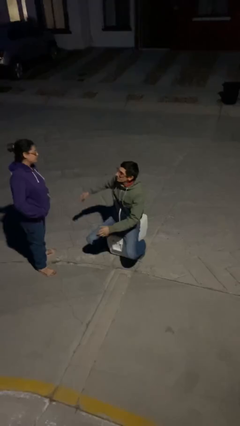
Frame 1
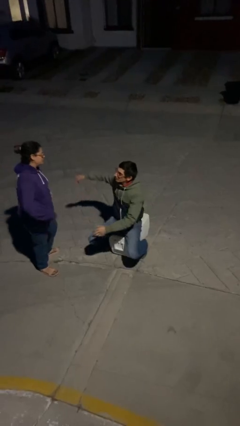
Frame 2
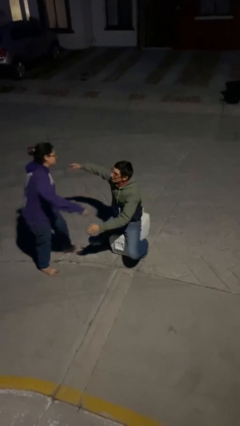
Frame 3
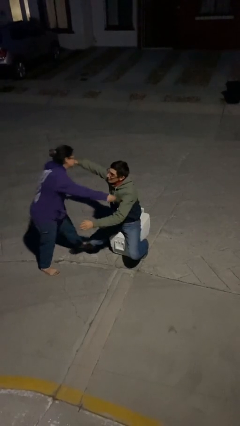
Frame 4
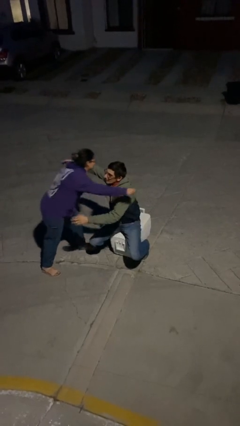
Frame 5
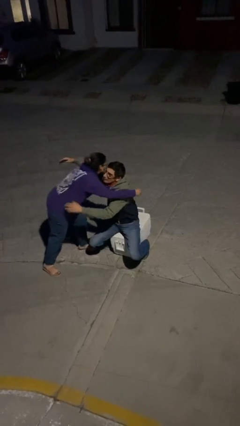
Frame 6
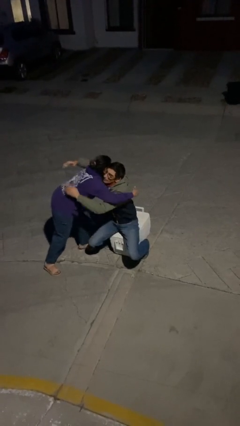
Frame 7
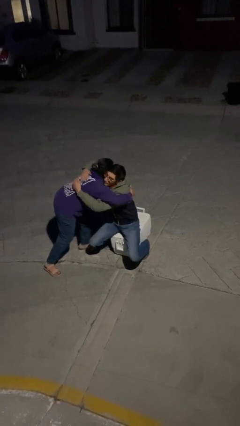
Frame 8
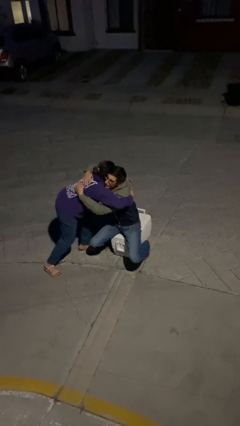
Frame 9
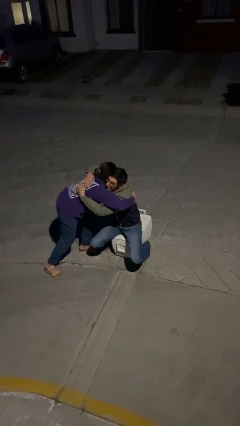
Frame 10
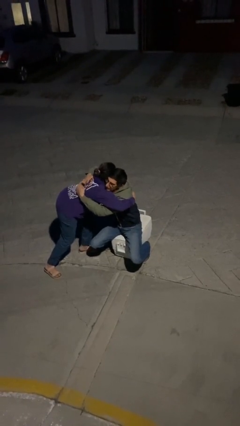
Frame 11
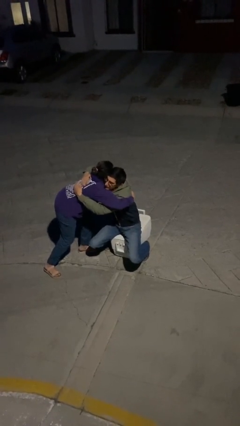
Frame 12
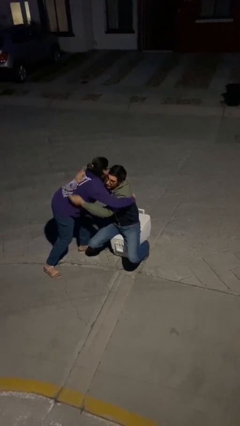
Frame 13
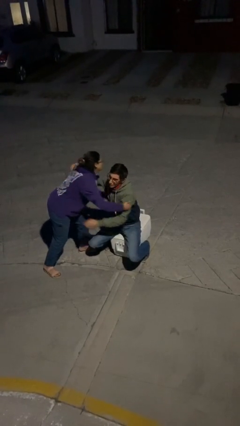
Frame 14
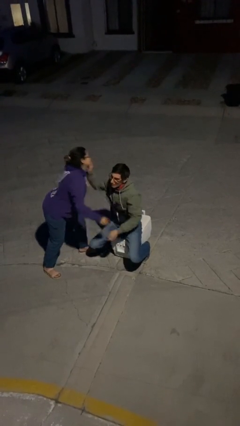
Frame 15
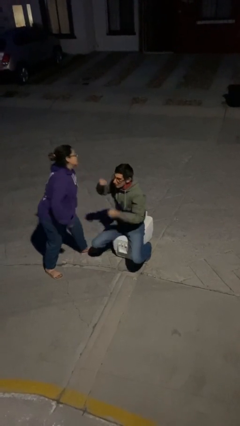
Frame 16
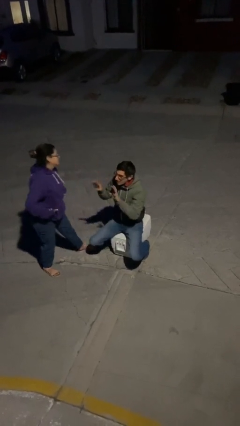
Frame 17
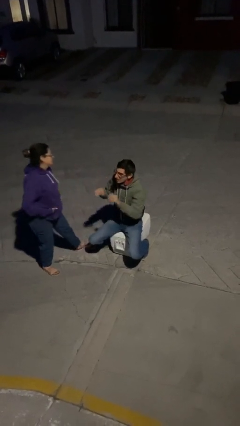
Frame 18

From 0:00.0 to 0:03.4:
person embraces person

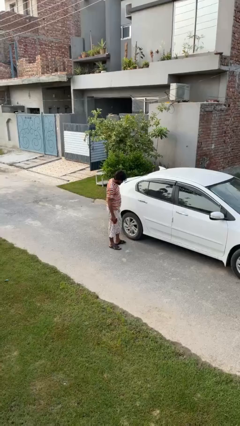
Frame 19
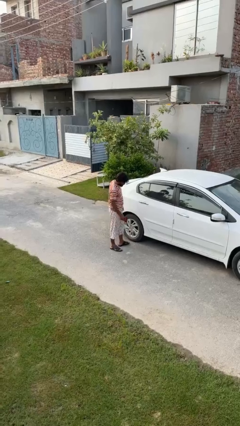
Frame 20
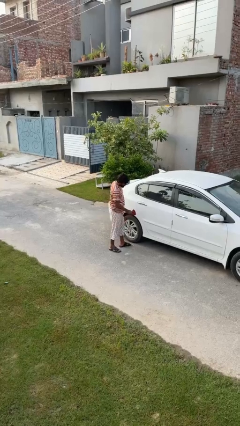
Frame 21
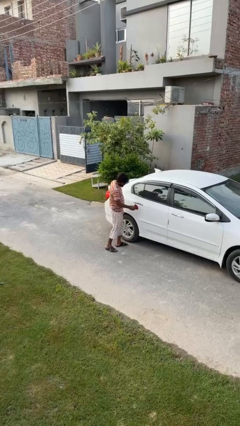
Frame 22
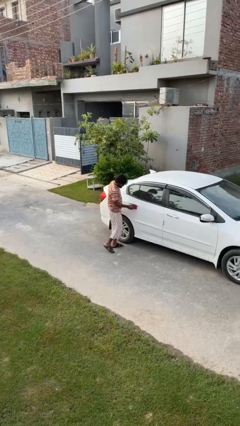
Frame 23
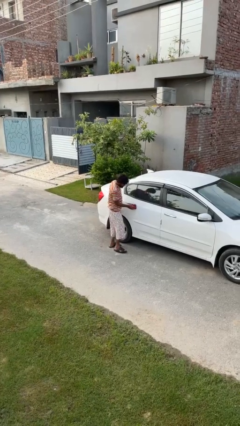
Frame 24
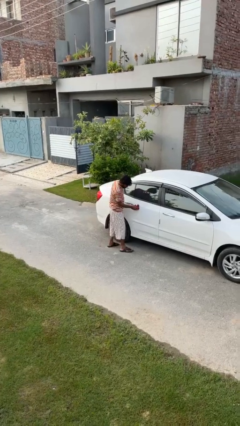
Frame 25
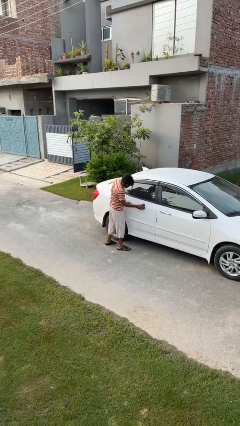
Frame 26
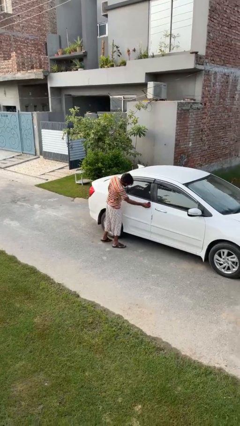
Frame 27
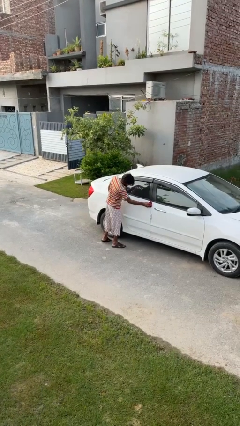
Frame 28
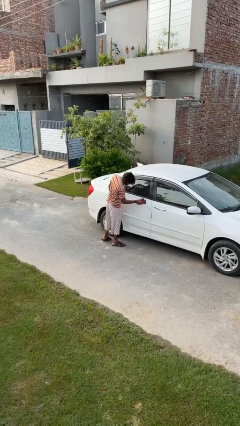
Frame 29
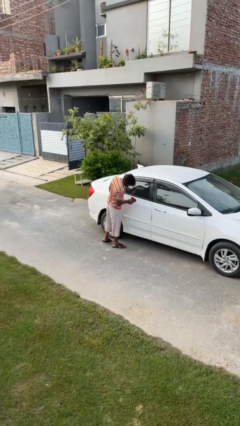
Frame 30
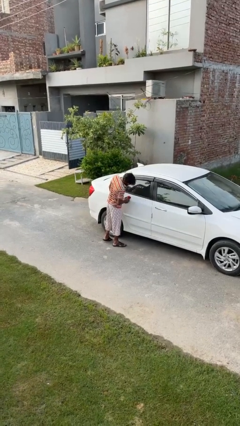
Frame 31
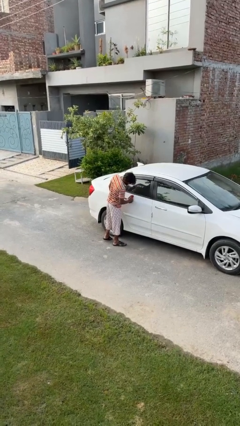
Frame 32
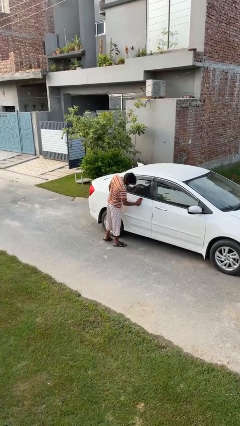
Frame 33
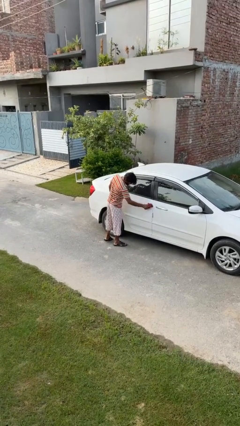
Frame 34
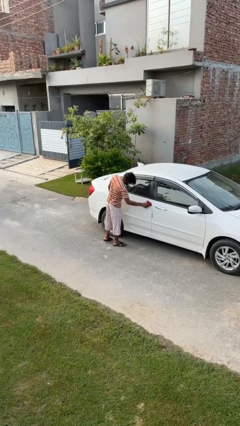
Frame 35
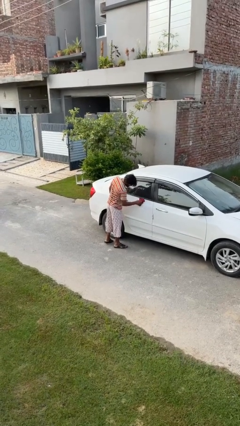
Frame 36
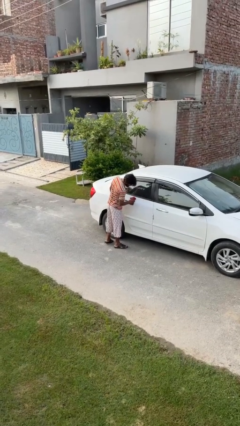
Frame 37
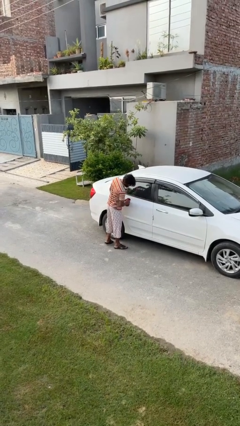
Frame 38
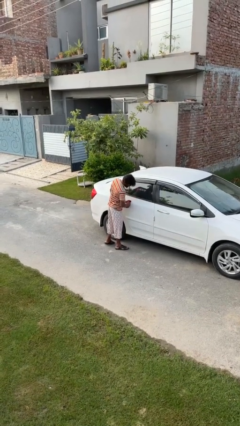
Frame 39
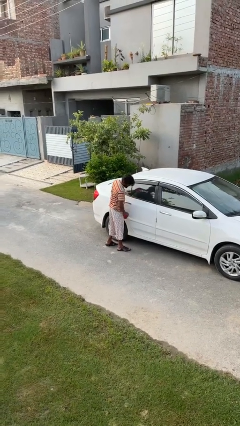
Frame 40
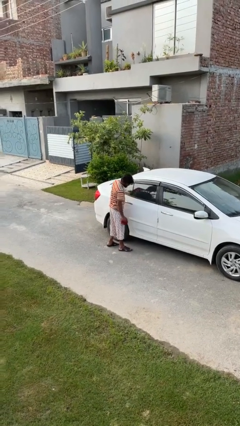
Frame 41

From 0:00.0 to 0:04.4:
person polishes car with rag

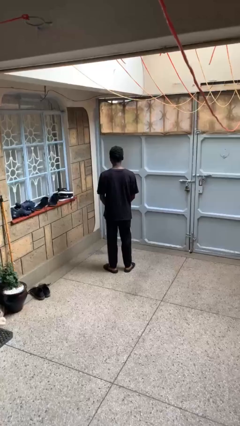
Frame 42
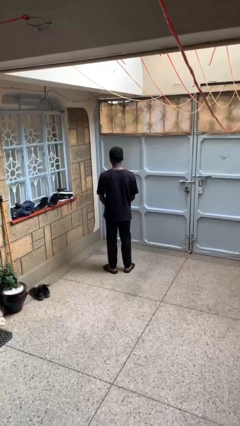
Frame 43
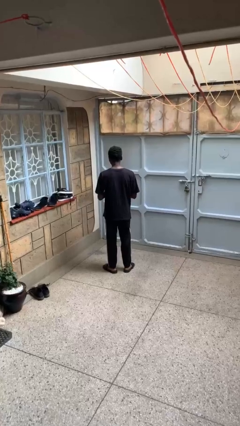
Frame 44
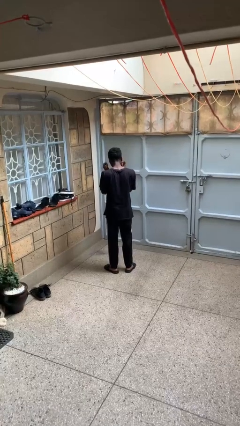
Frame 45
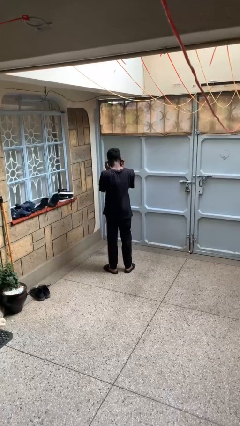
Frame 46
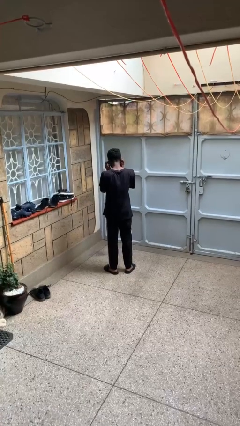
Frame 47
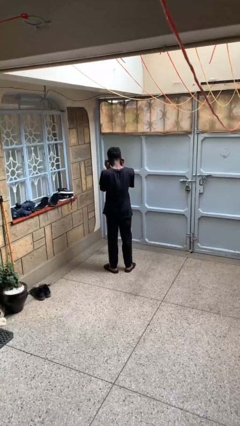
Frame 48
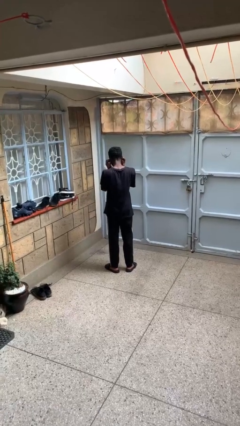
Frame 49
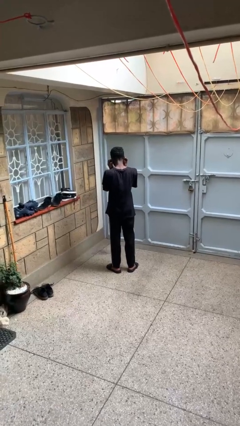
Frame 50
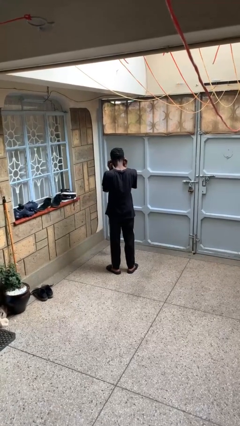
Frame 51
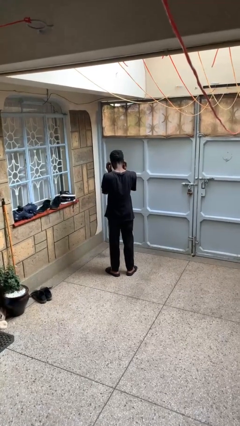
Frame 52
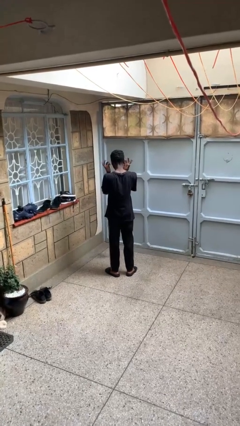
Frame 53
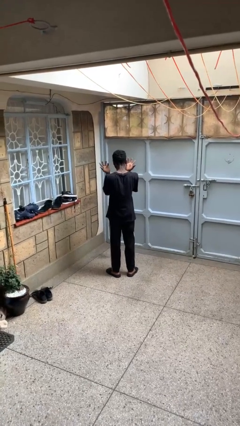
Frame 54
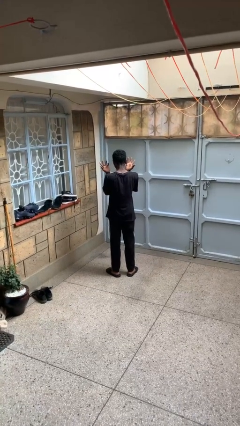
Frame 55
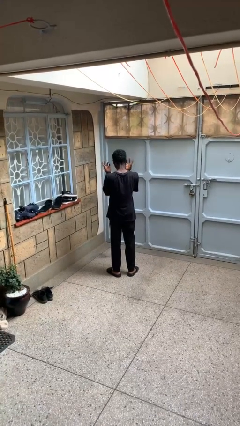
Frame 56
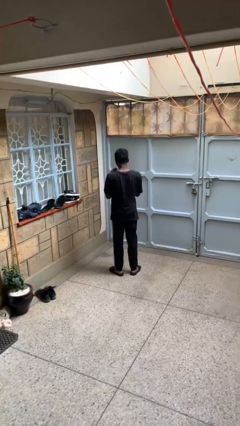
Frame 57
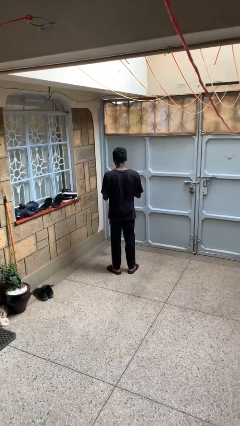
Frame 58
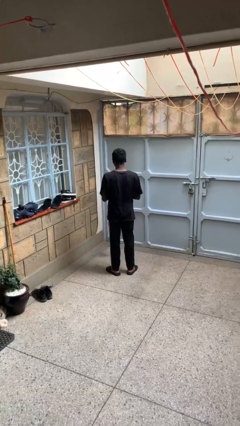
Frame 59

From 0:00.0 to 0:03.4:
person puts fingers in ear

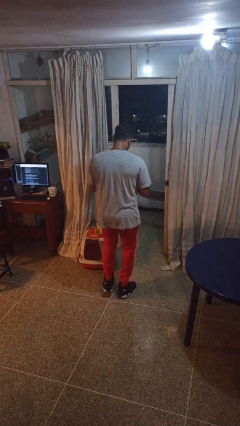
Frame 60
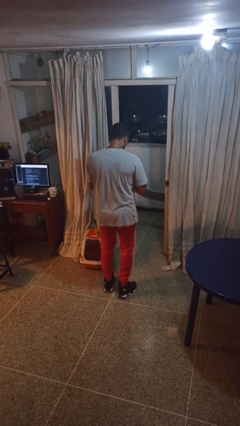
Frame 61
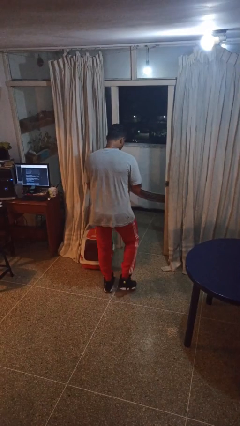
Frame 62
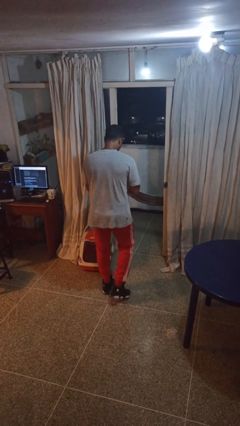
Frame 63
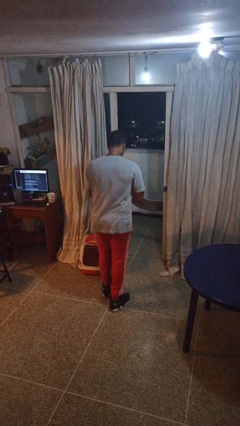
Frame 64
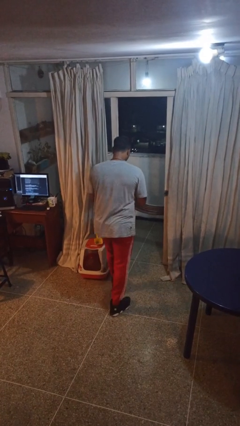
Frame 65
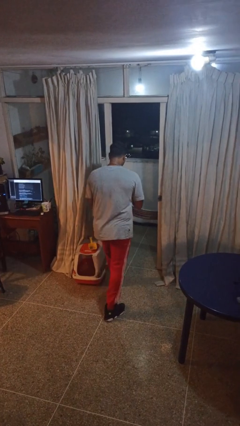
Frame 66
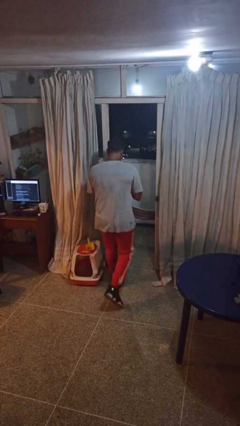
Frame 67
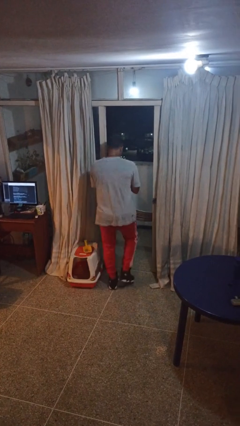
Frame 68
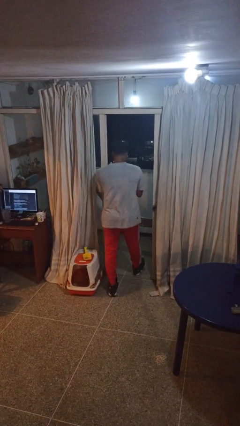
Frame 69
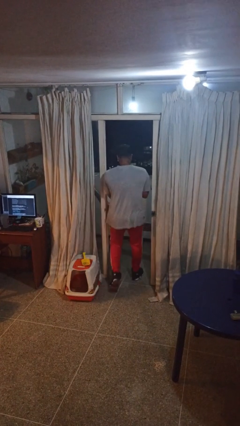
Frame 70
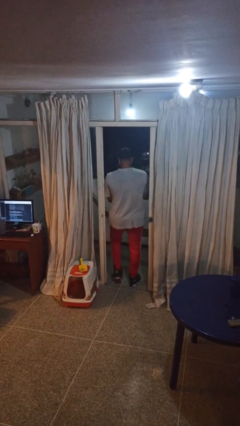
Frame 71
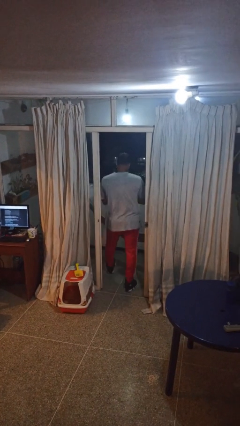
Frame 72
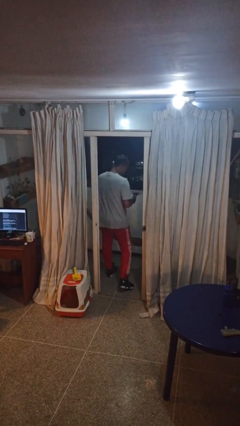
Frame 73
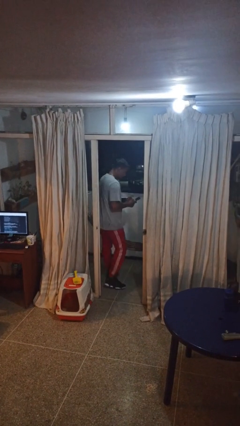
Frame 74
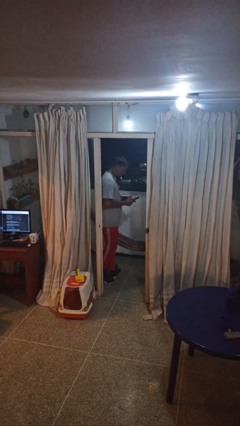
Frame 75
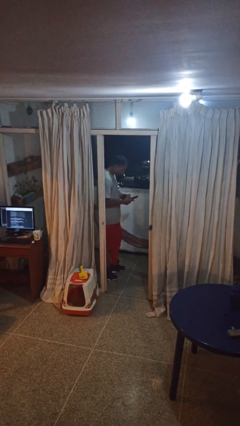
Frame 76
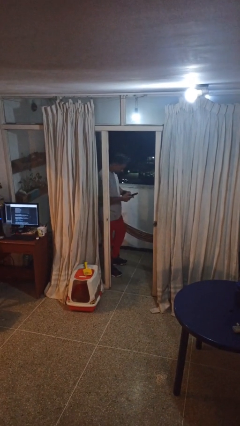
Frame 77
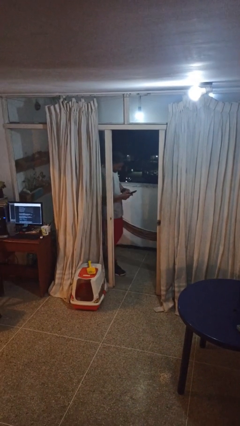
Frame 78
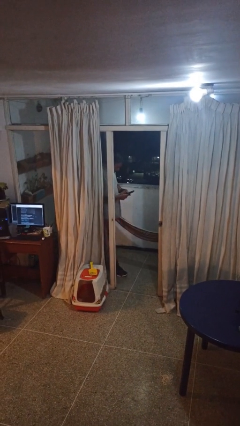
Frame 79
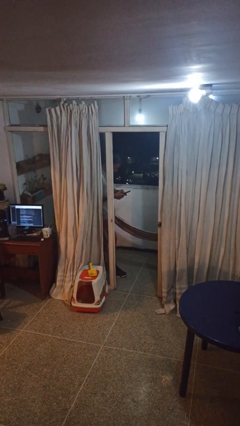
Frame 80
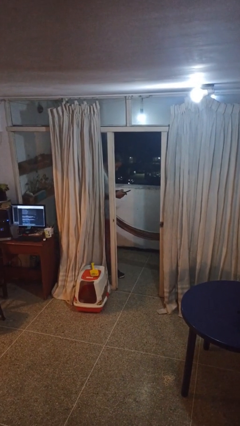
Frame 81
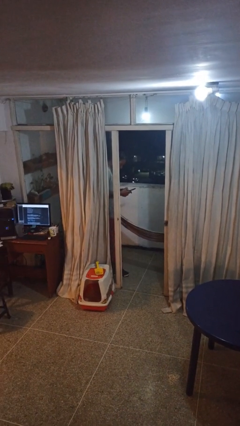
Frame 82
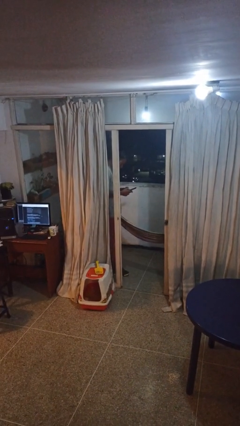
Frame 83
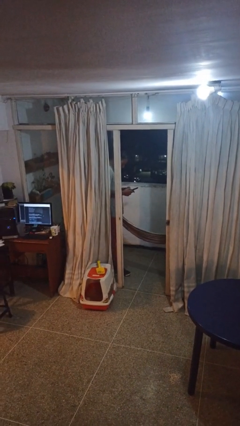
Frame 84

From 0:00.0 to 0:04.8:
person exits scene through structure

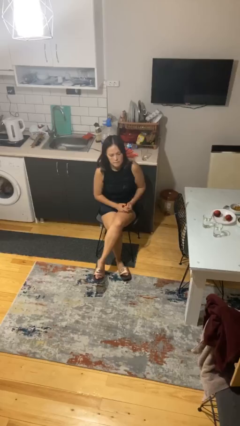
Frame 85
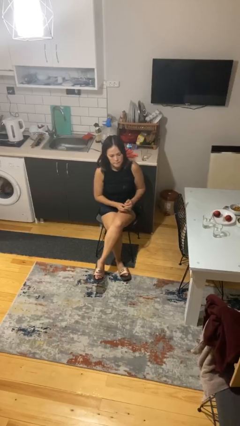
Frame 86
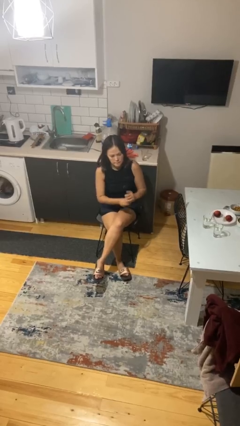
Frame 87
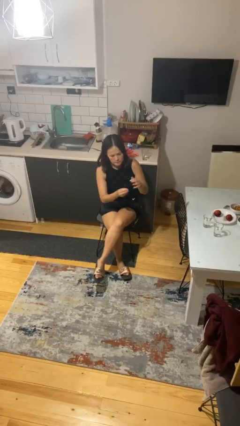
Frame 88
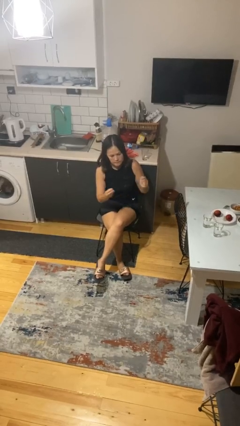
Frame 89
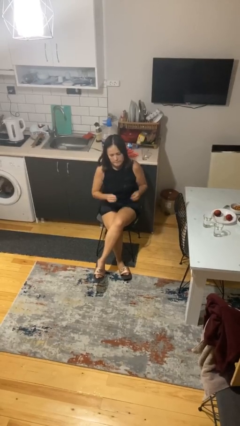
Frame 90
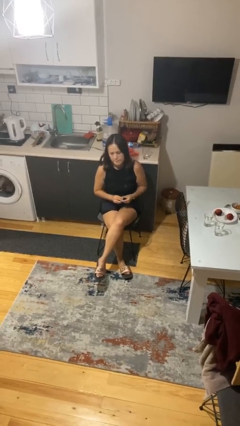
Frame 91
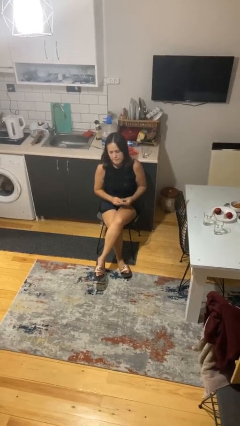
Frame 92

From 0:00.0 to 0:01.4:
person puts on ring
